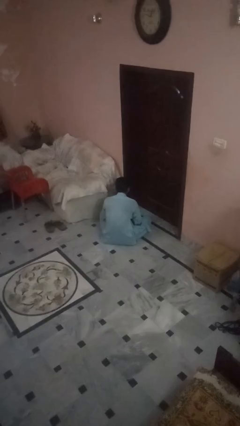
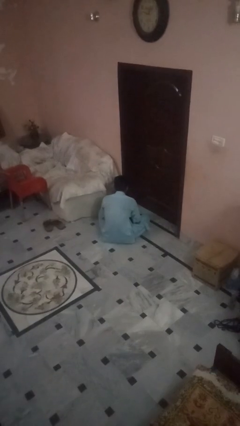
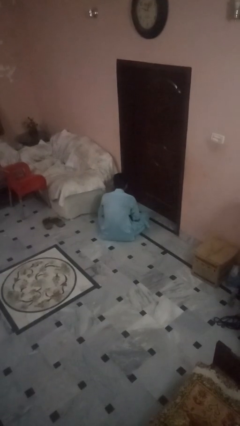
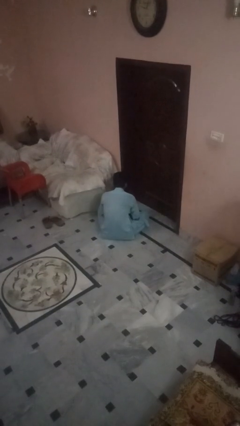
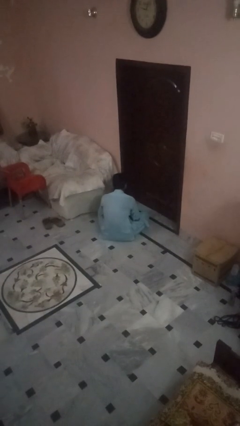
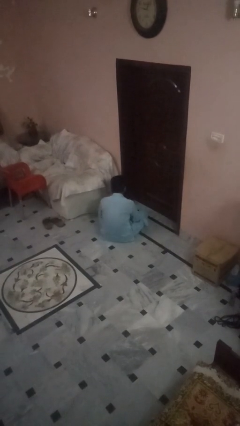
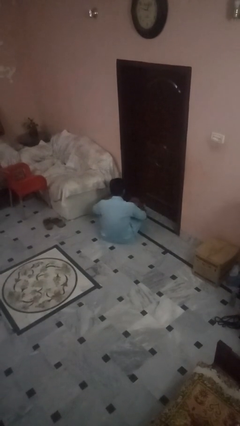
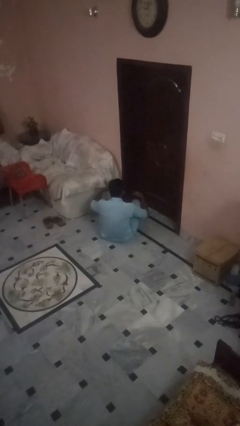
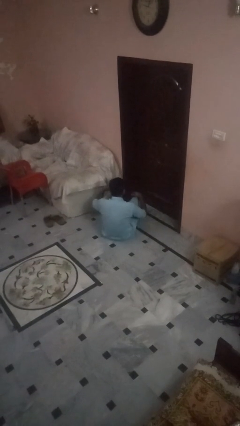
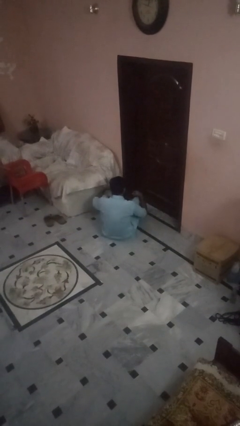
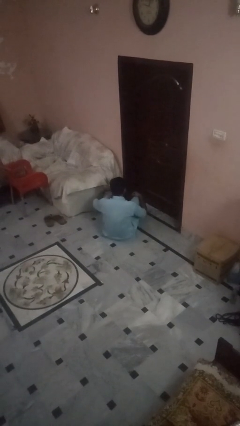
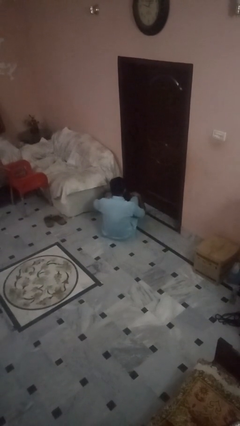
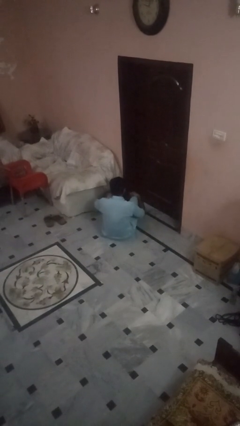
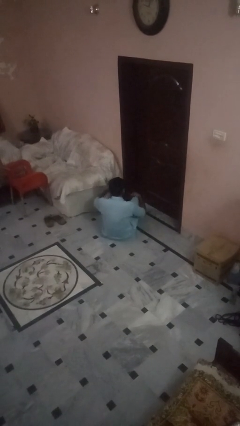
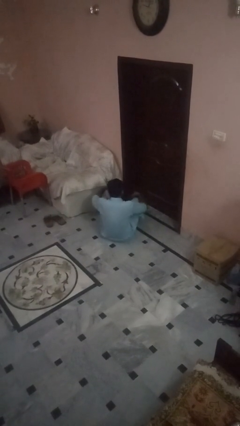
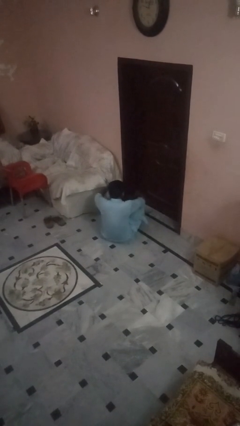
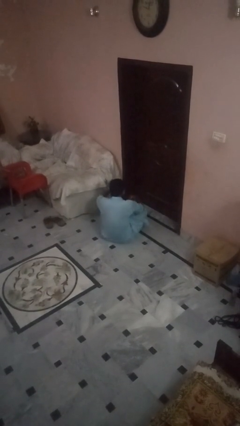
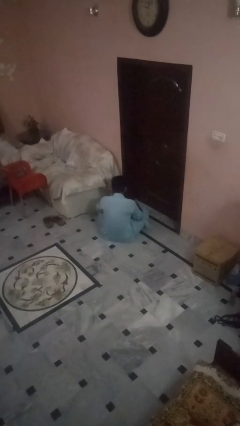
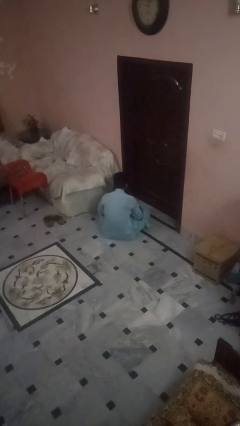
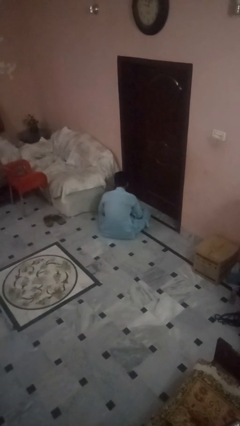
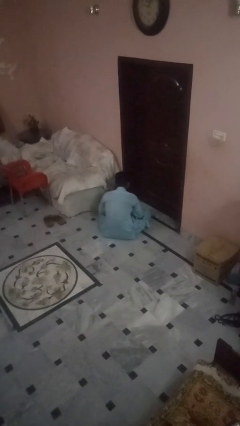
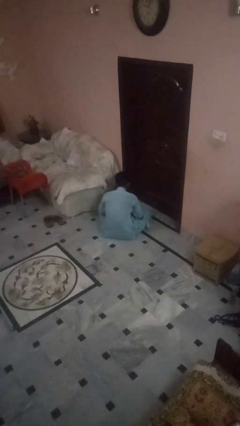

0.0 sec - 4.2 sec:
person crosses legs

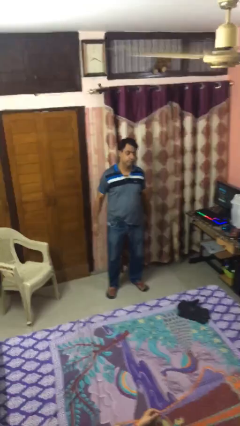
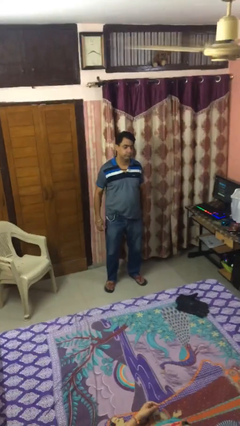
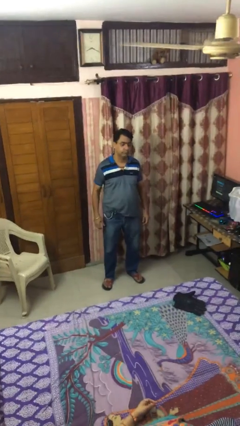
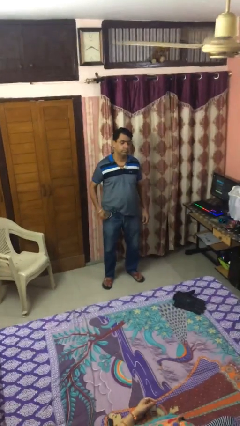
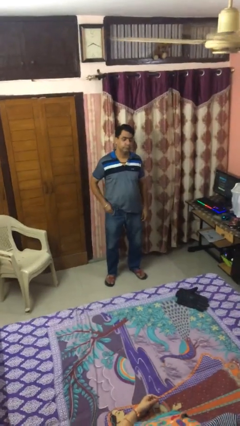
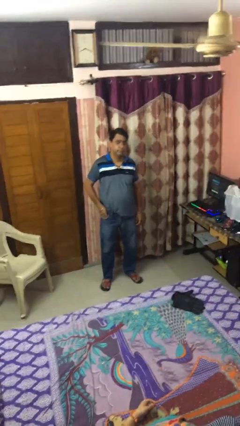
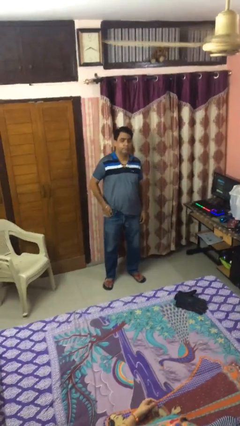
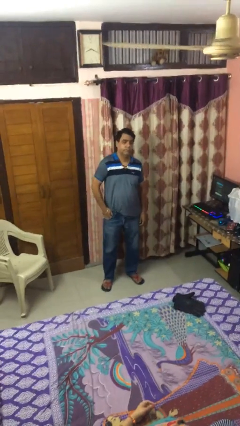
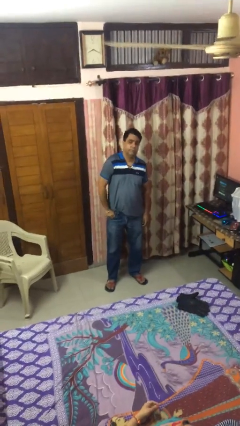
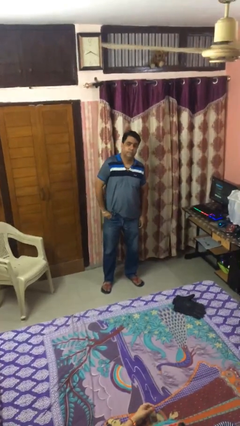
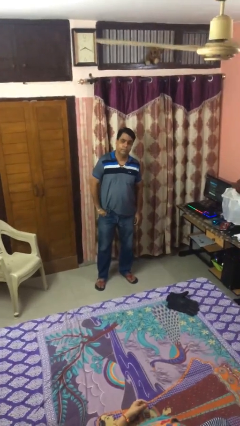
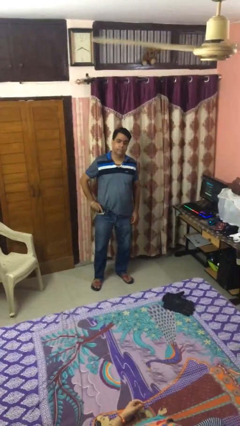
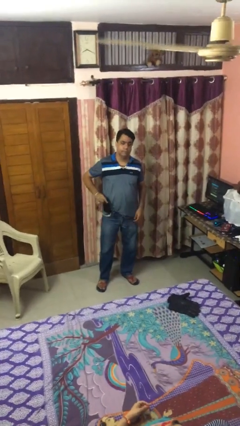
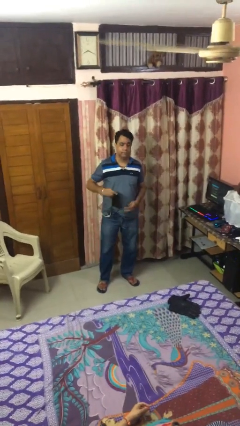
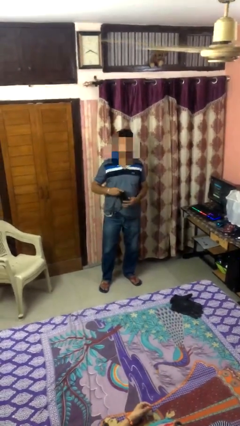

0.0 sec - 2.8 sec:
person takes phone from pocket

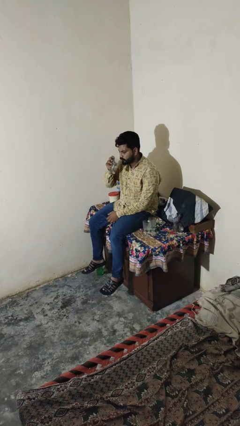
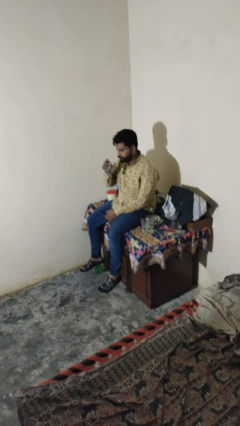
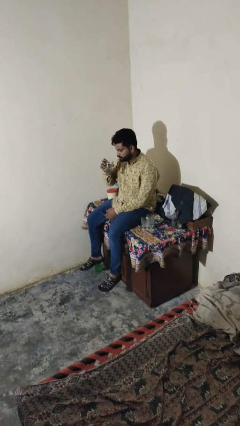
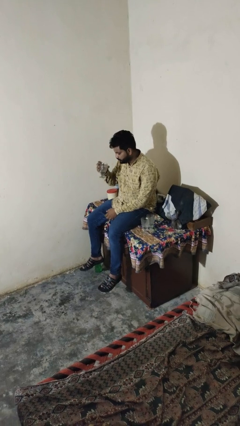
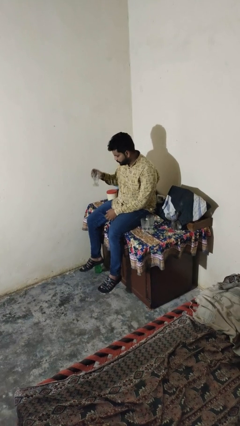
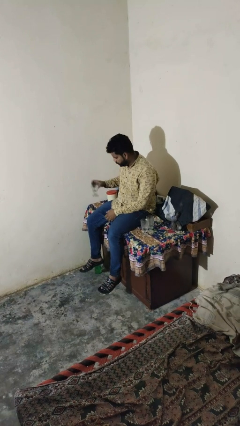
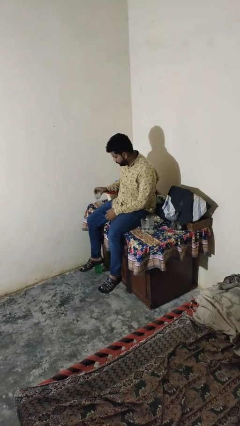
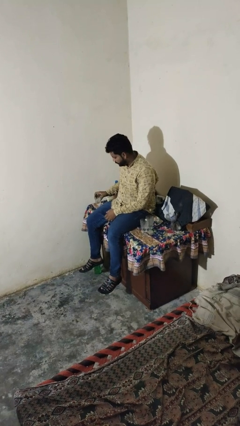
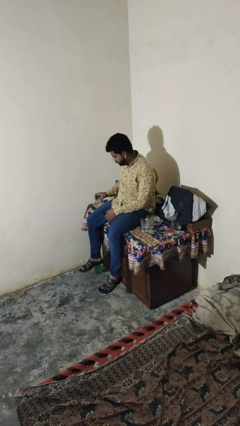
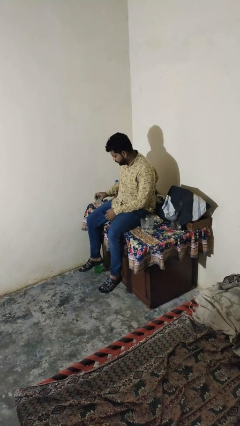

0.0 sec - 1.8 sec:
person puts down object on table

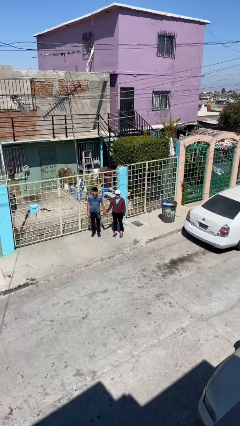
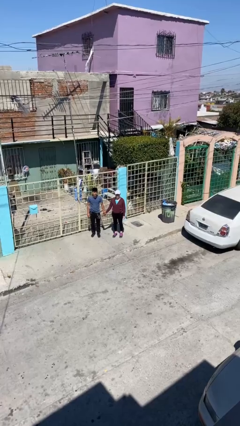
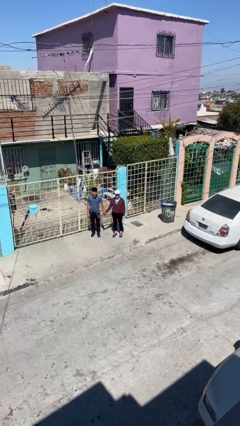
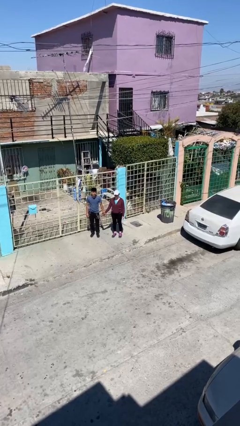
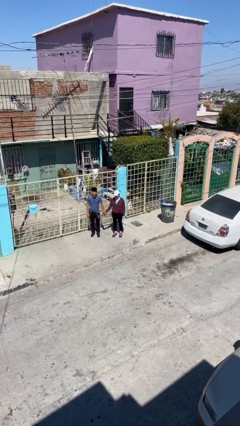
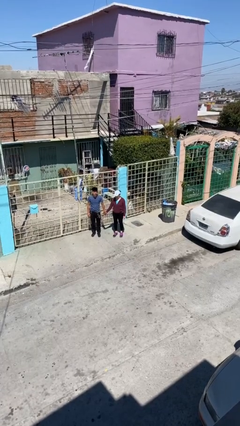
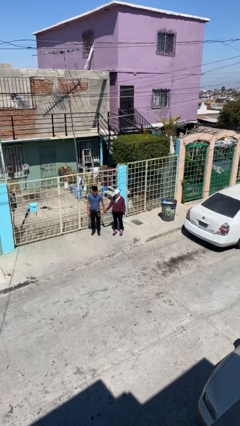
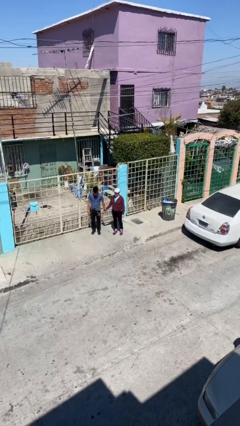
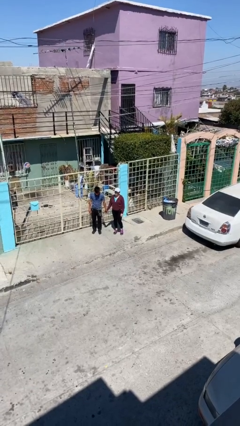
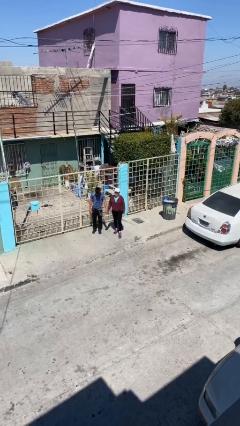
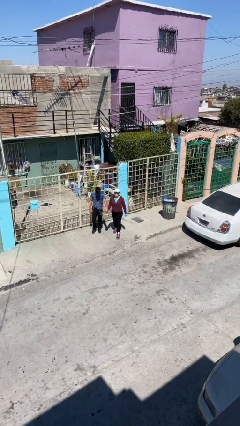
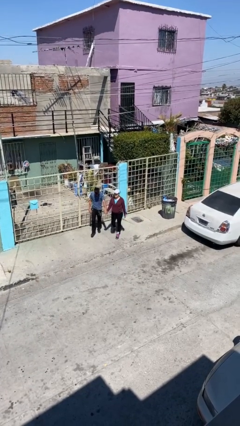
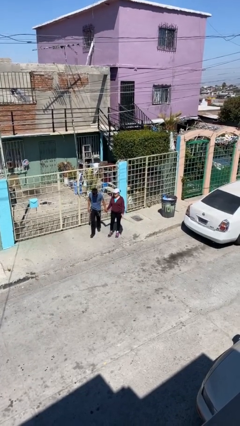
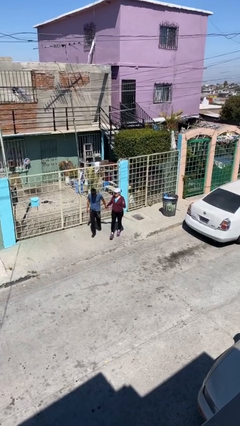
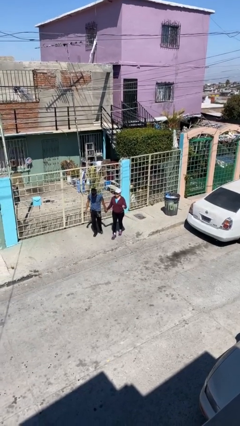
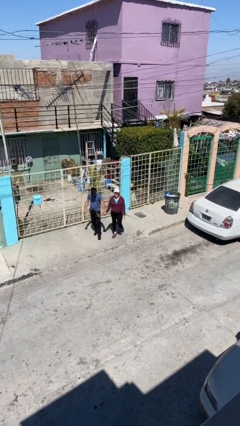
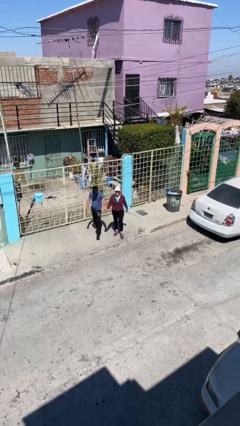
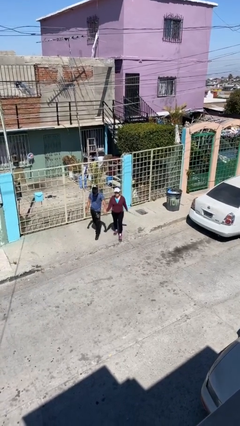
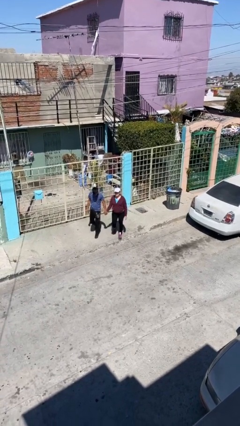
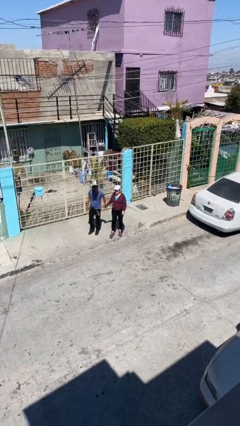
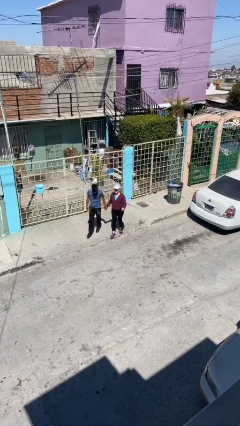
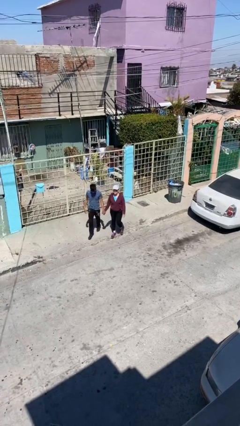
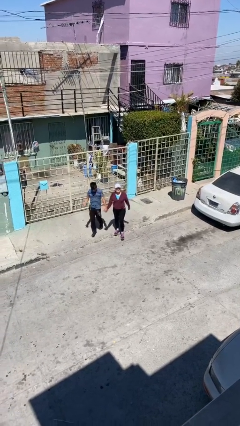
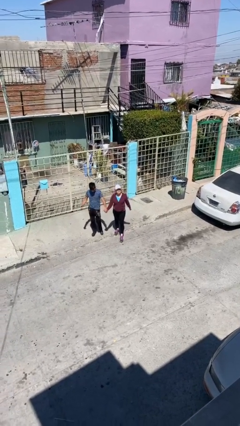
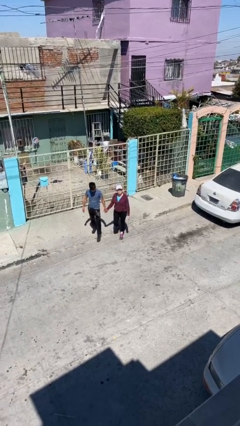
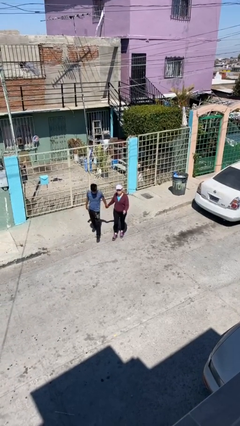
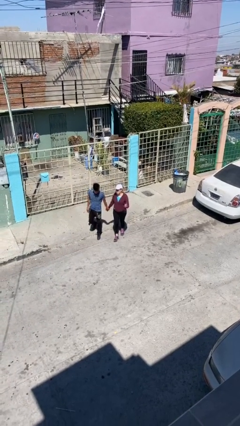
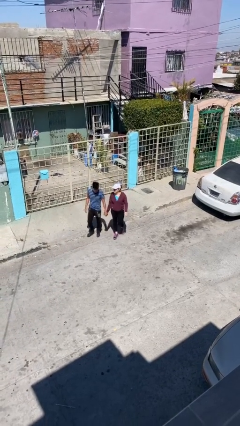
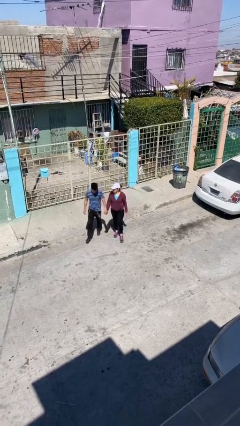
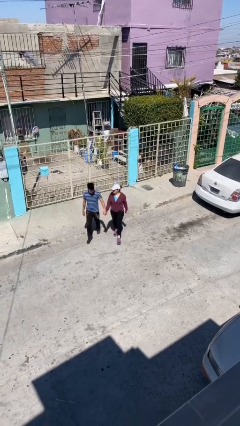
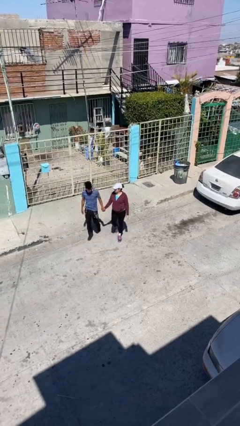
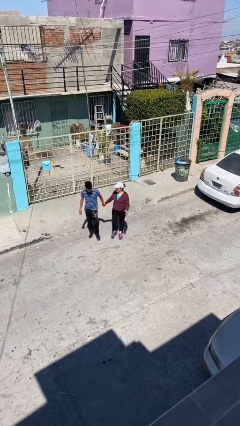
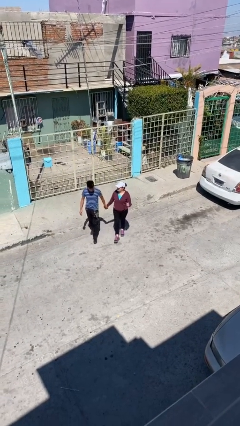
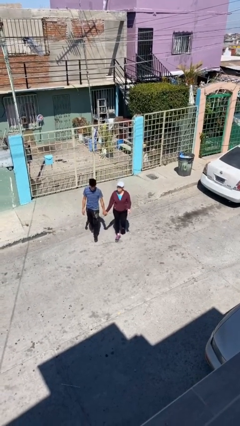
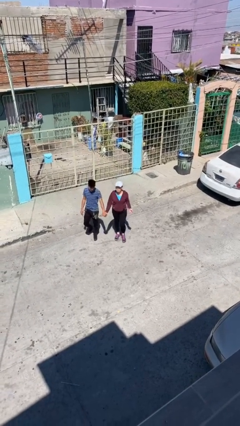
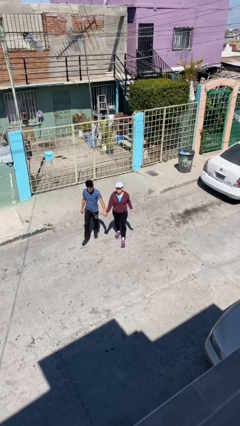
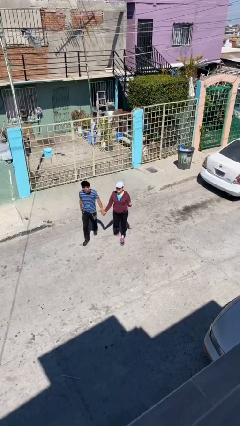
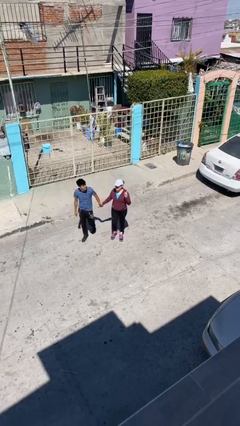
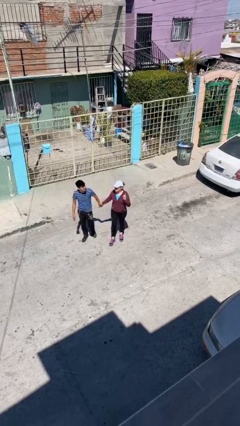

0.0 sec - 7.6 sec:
person holds hand

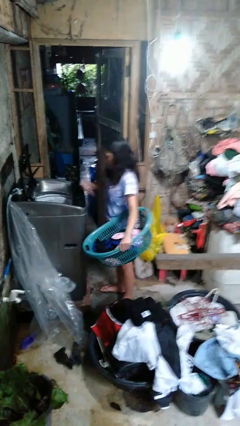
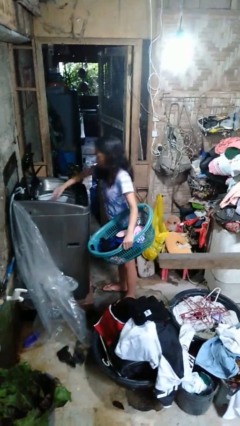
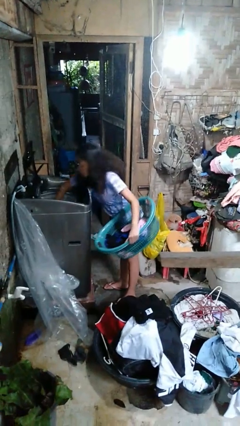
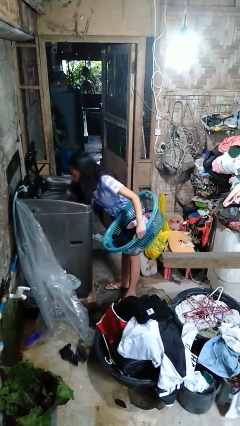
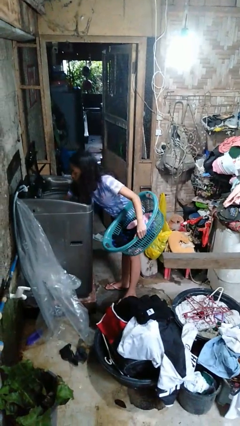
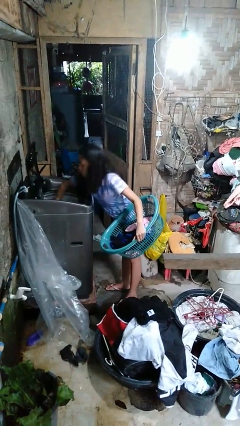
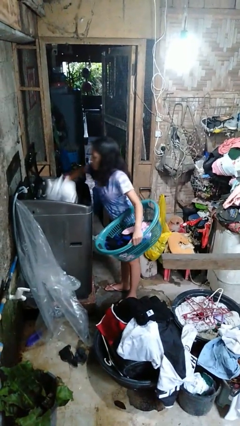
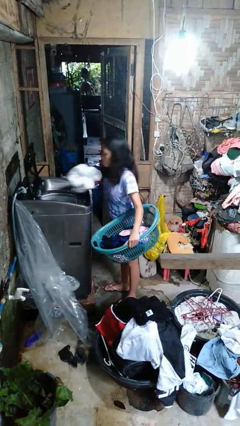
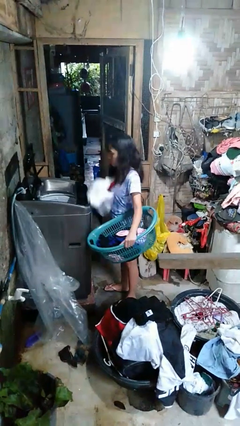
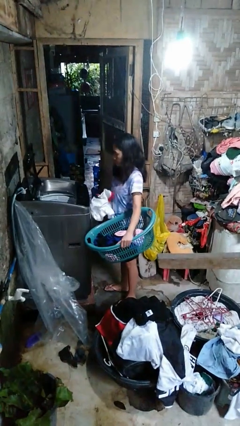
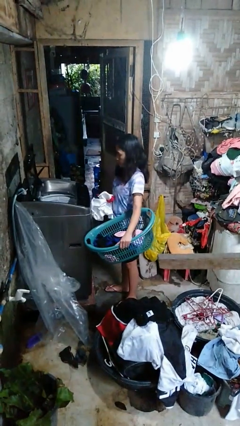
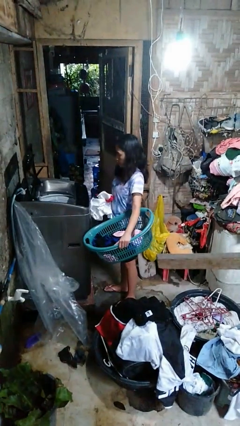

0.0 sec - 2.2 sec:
person unloads clotheswasher
